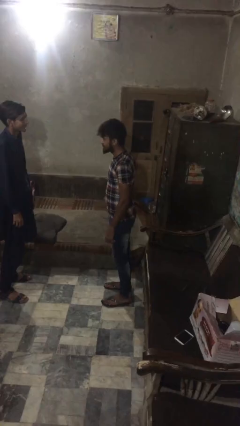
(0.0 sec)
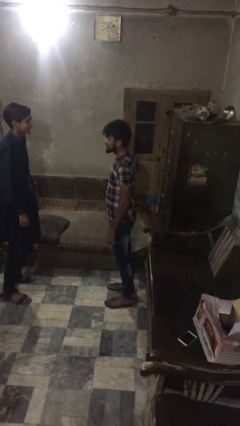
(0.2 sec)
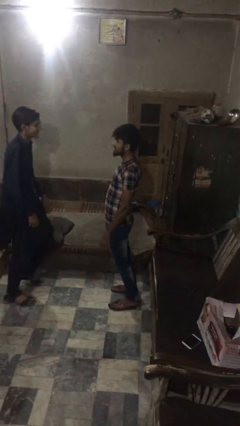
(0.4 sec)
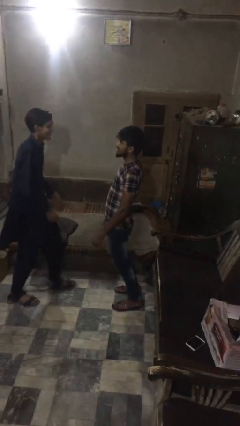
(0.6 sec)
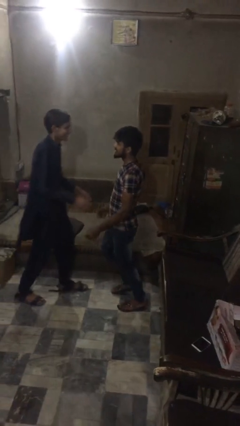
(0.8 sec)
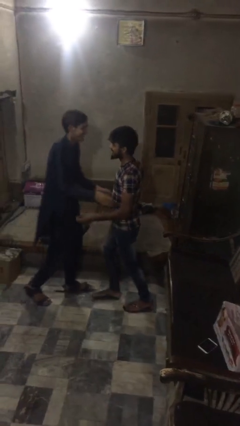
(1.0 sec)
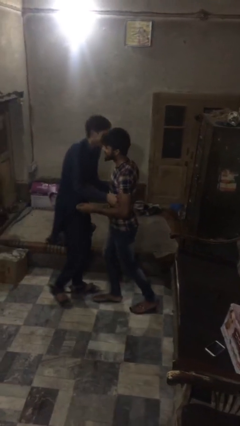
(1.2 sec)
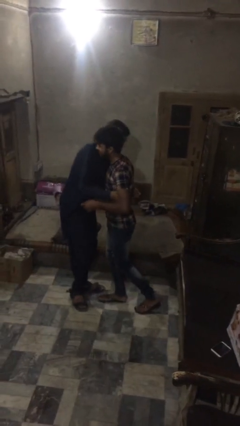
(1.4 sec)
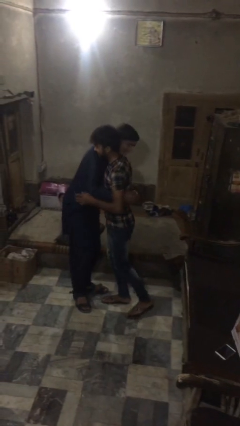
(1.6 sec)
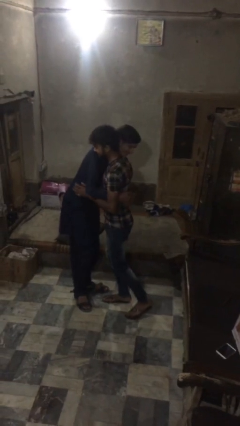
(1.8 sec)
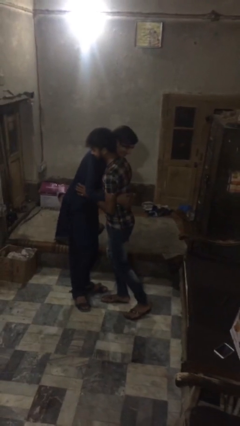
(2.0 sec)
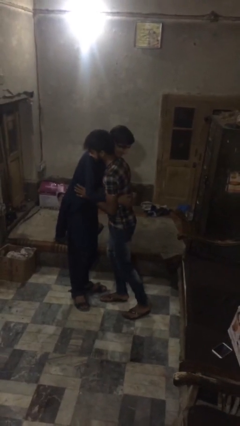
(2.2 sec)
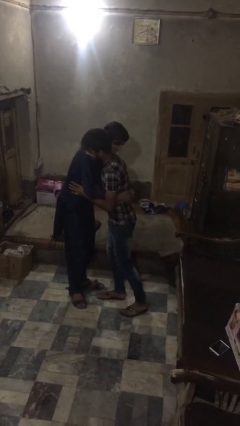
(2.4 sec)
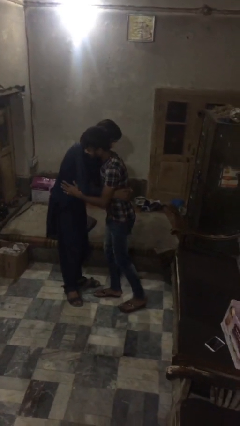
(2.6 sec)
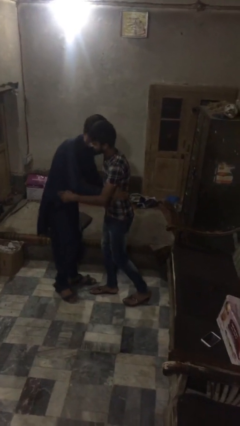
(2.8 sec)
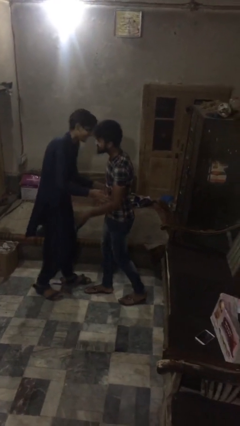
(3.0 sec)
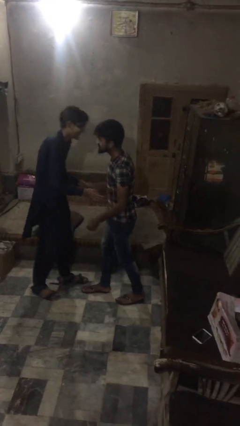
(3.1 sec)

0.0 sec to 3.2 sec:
person embraces person

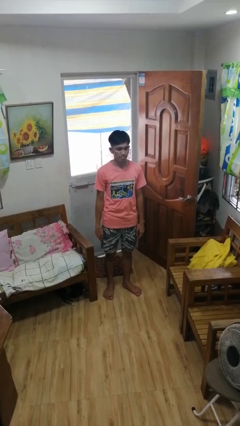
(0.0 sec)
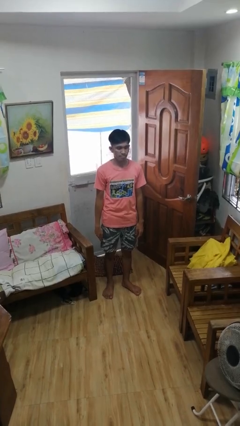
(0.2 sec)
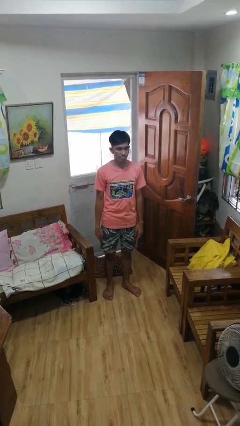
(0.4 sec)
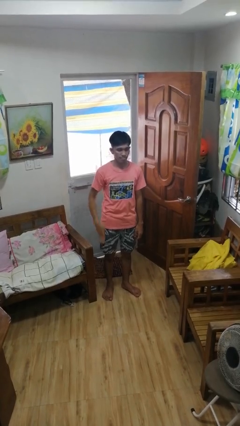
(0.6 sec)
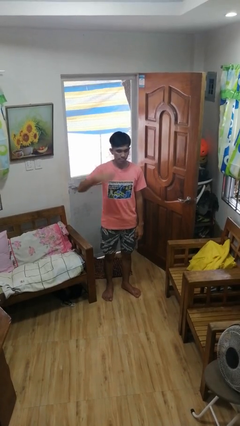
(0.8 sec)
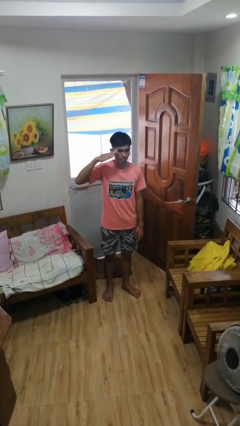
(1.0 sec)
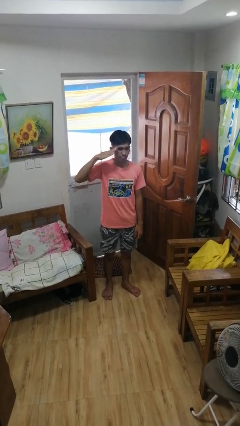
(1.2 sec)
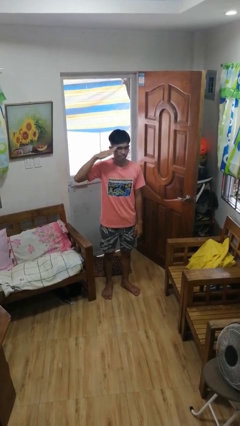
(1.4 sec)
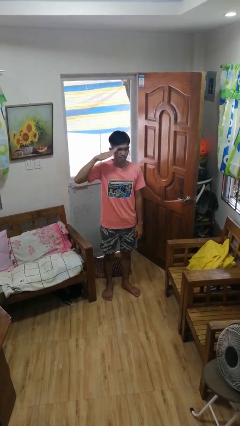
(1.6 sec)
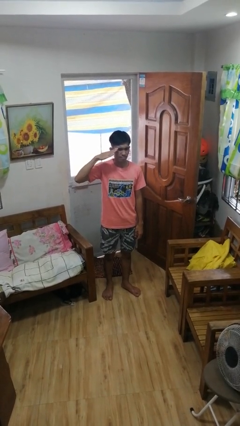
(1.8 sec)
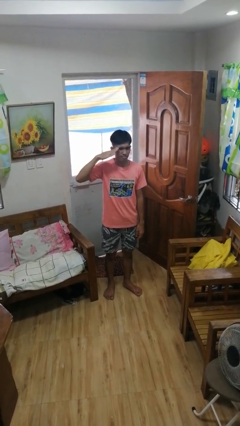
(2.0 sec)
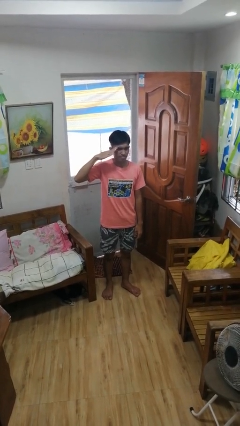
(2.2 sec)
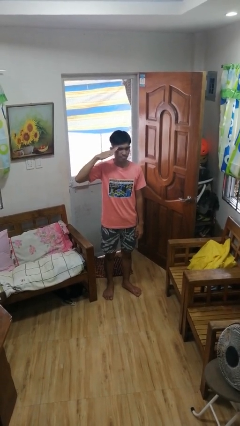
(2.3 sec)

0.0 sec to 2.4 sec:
person salutes

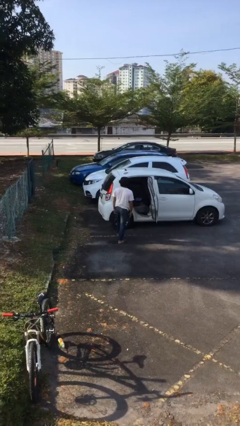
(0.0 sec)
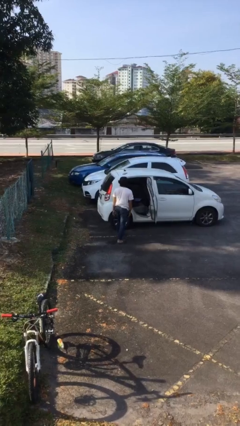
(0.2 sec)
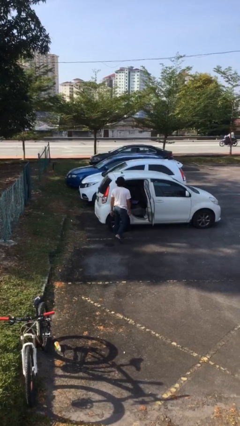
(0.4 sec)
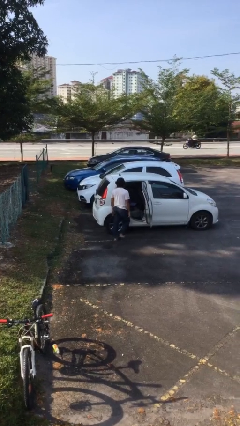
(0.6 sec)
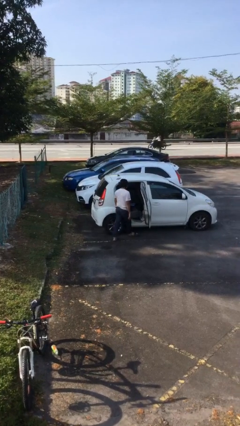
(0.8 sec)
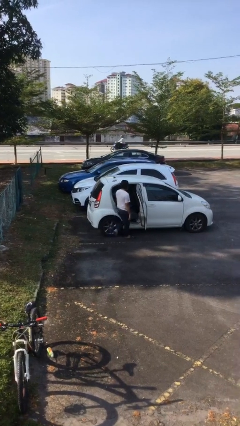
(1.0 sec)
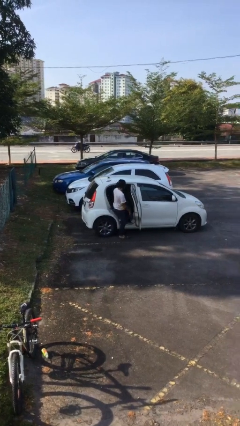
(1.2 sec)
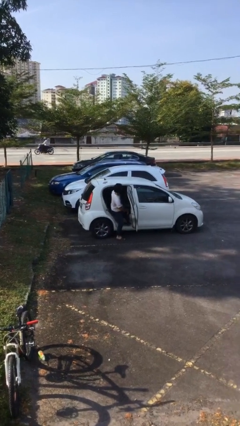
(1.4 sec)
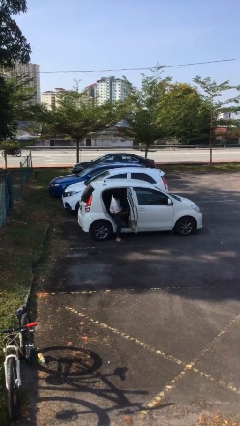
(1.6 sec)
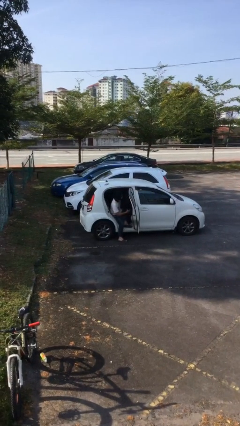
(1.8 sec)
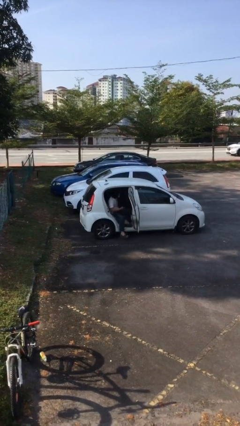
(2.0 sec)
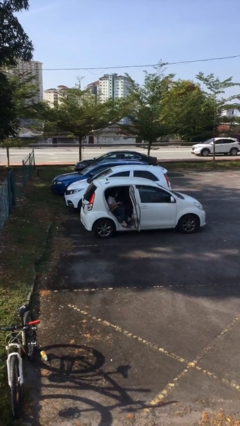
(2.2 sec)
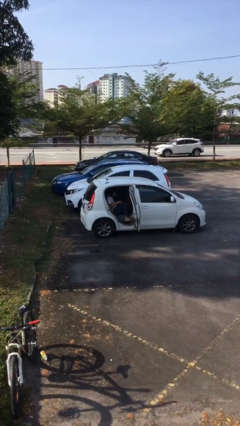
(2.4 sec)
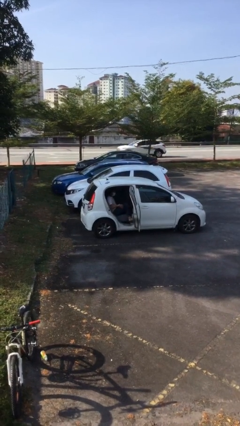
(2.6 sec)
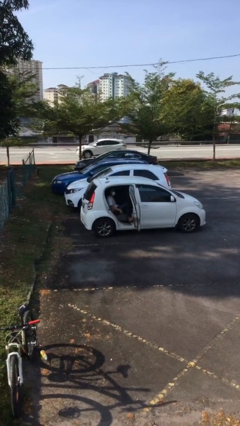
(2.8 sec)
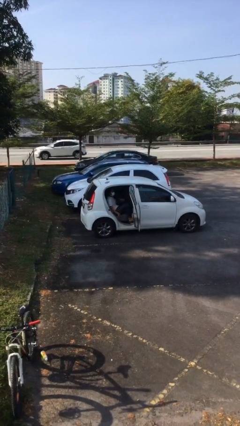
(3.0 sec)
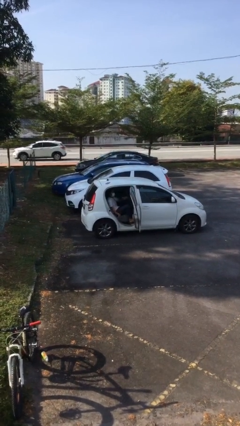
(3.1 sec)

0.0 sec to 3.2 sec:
person enters car

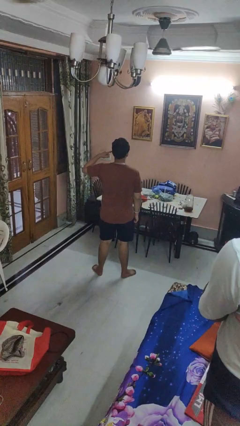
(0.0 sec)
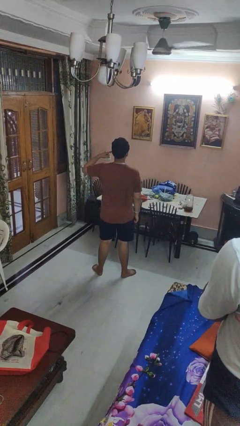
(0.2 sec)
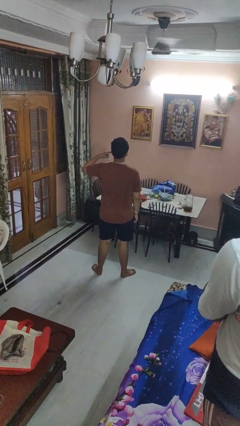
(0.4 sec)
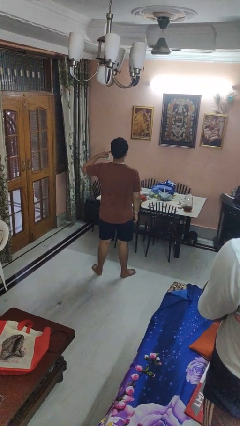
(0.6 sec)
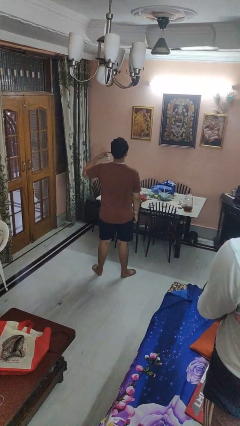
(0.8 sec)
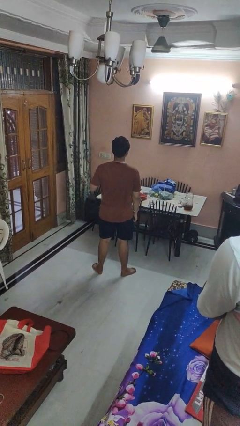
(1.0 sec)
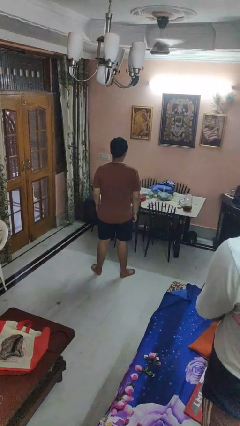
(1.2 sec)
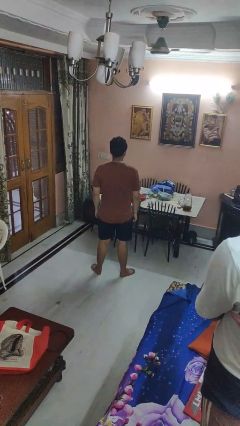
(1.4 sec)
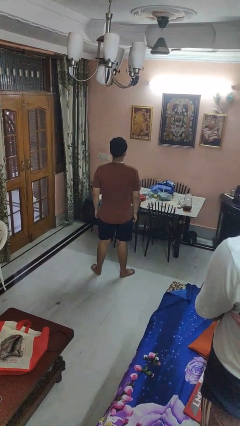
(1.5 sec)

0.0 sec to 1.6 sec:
person gestures listen closely

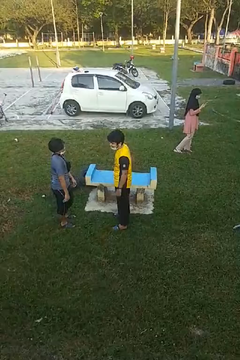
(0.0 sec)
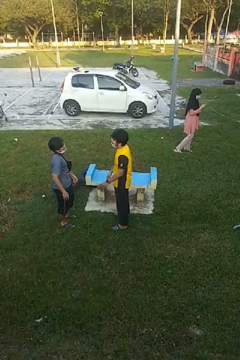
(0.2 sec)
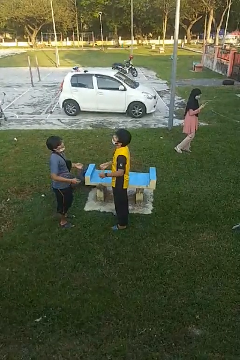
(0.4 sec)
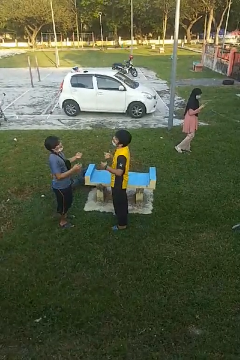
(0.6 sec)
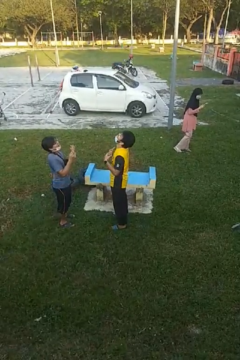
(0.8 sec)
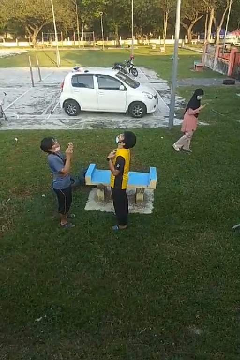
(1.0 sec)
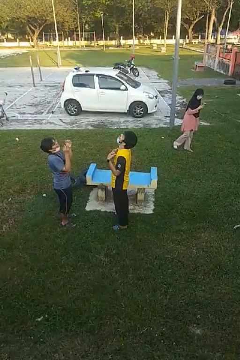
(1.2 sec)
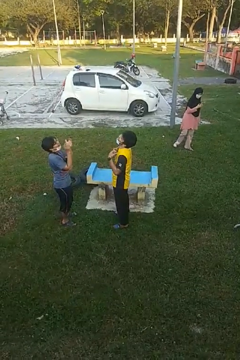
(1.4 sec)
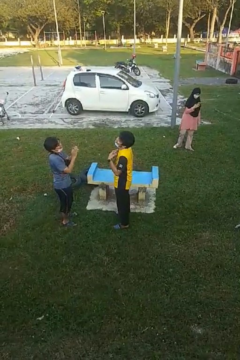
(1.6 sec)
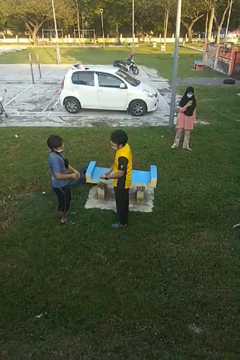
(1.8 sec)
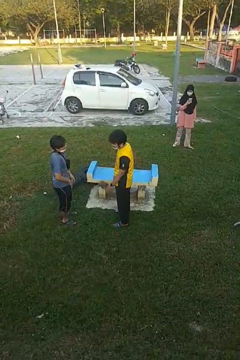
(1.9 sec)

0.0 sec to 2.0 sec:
person laughs with person

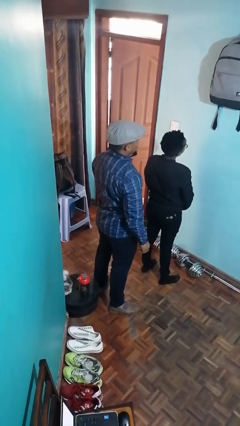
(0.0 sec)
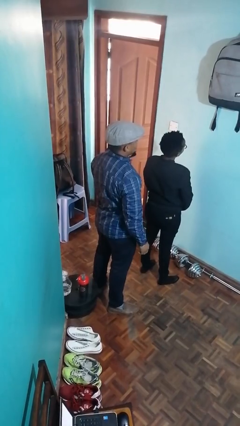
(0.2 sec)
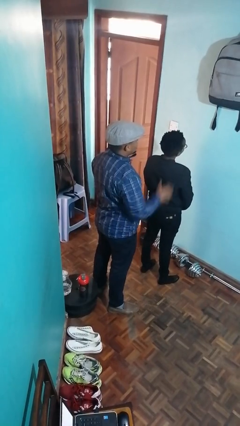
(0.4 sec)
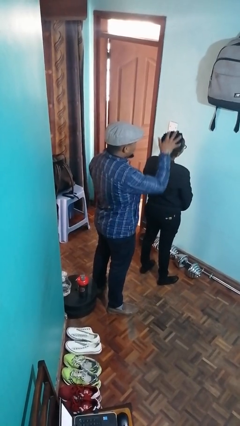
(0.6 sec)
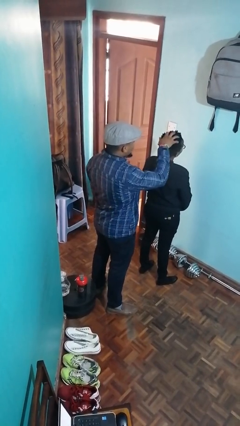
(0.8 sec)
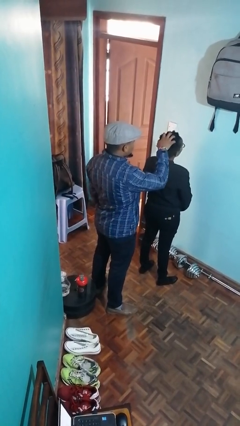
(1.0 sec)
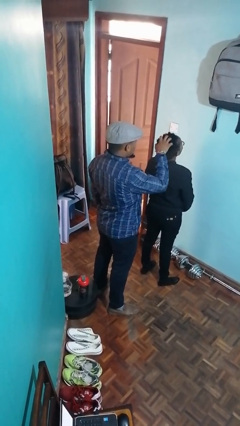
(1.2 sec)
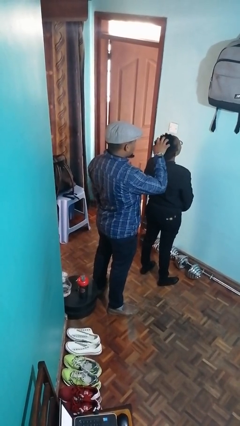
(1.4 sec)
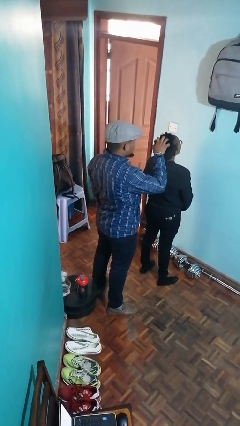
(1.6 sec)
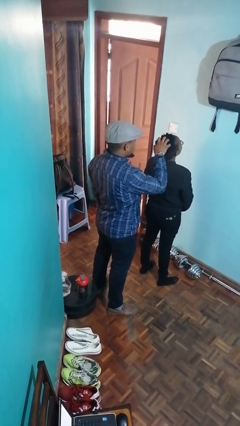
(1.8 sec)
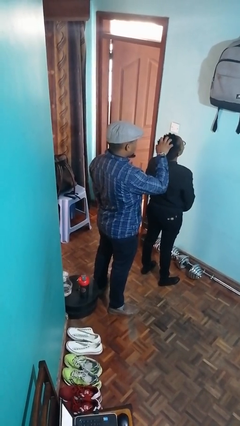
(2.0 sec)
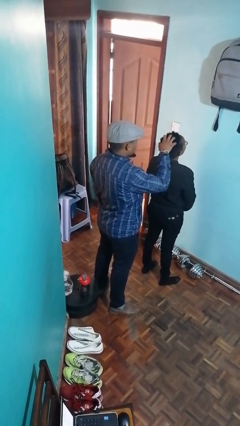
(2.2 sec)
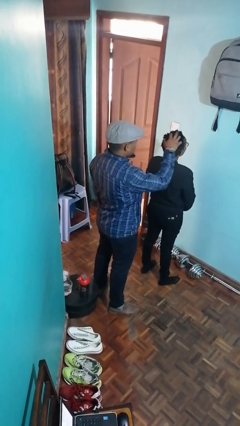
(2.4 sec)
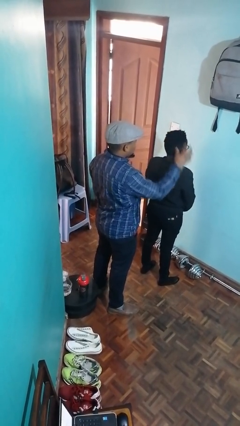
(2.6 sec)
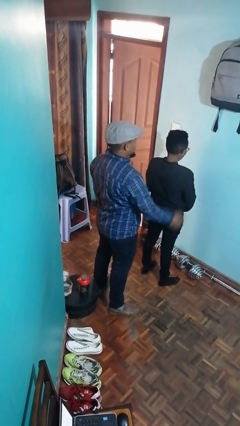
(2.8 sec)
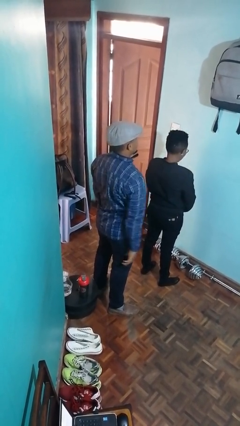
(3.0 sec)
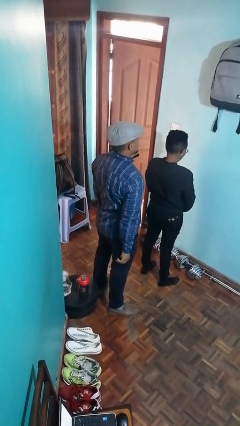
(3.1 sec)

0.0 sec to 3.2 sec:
person grabs person by hair

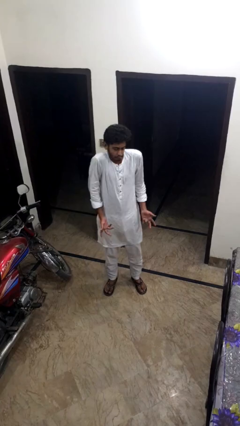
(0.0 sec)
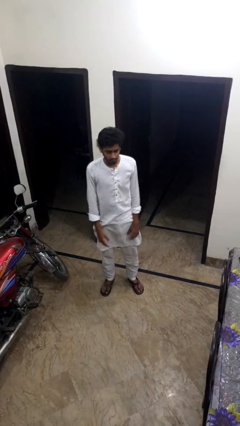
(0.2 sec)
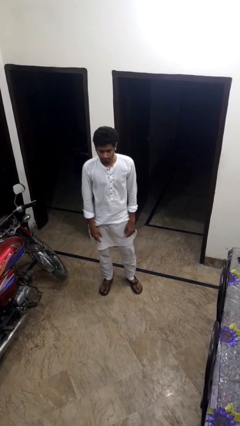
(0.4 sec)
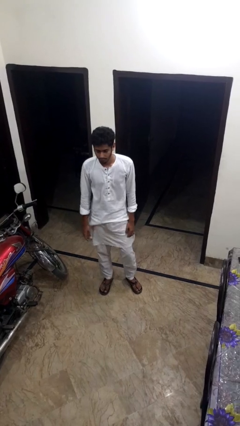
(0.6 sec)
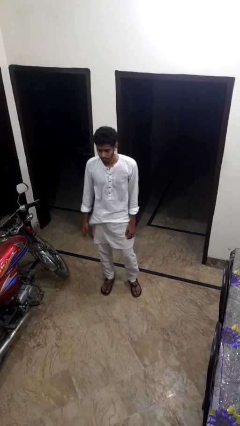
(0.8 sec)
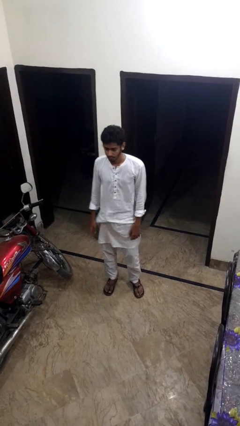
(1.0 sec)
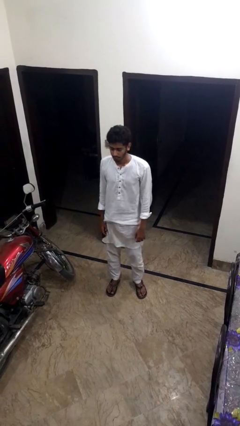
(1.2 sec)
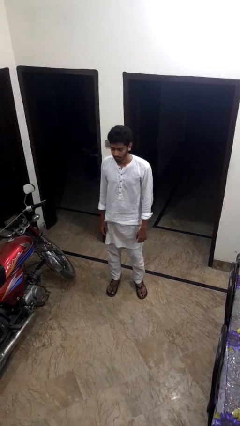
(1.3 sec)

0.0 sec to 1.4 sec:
person shrugs

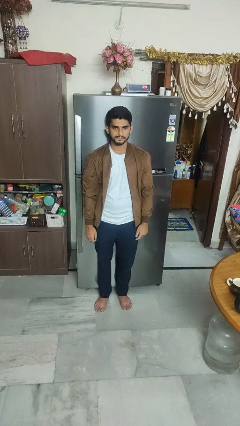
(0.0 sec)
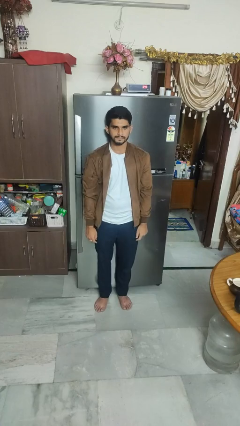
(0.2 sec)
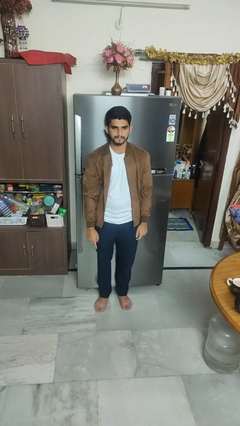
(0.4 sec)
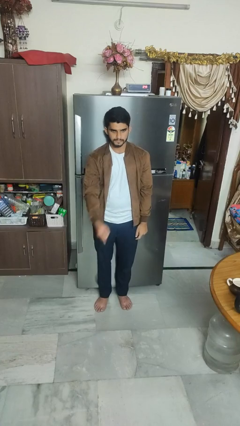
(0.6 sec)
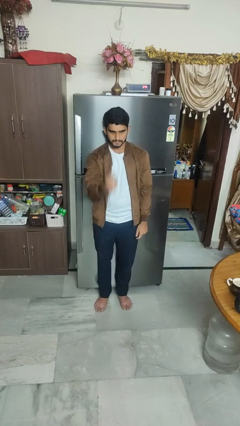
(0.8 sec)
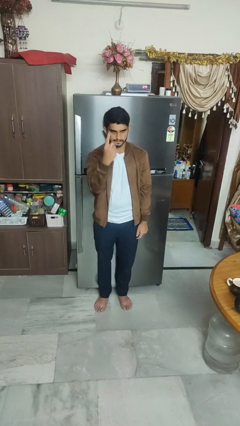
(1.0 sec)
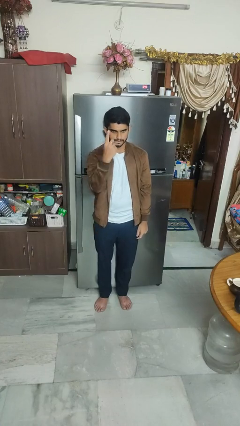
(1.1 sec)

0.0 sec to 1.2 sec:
person gestures number one
